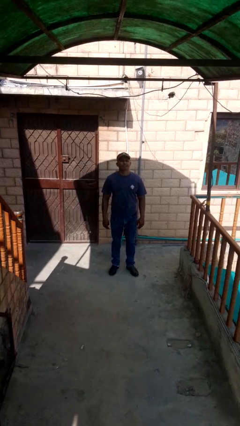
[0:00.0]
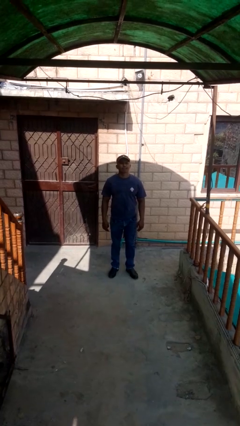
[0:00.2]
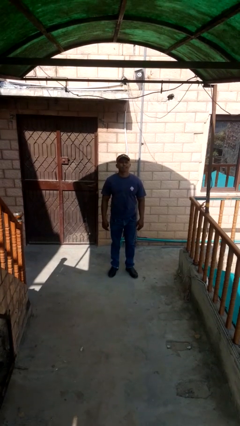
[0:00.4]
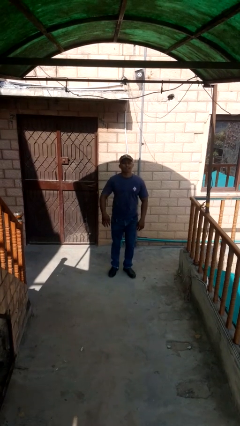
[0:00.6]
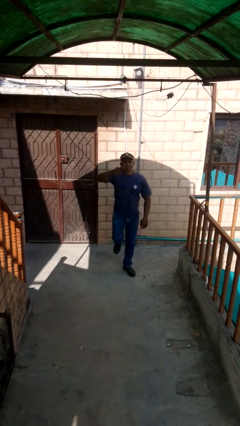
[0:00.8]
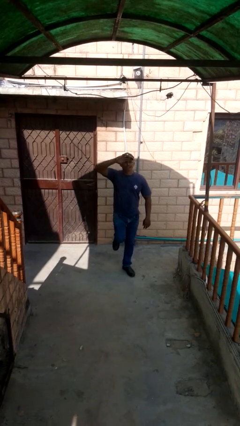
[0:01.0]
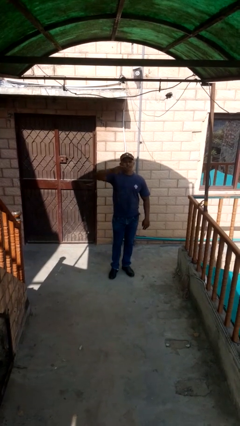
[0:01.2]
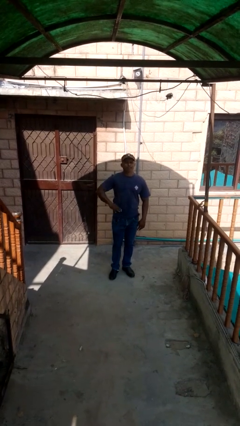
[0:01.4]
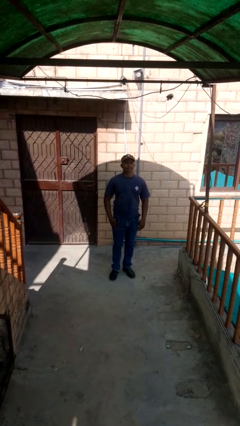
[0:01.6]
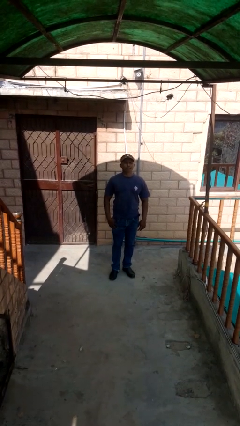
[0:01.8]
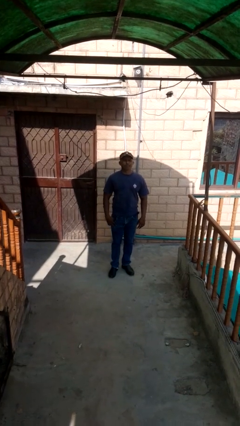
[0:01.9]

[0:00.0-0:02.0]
person salutes

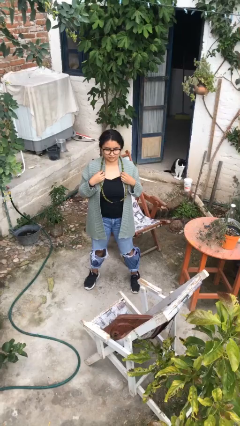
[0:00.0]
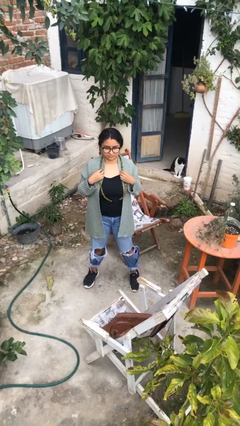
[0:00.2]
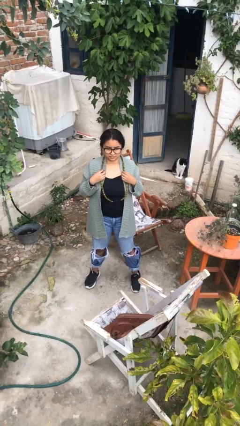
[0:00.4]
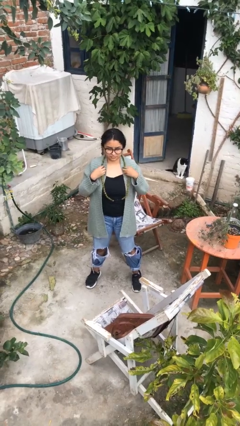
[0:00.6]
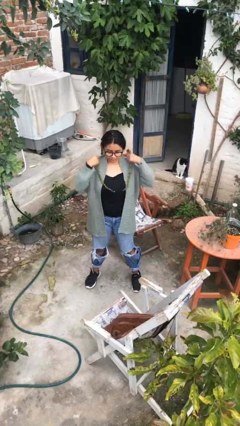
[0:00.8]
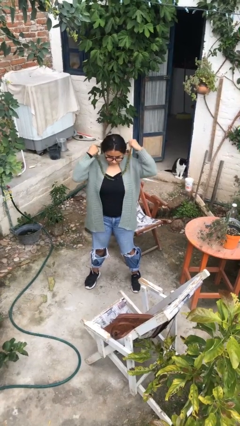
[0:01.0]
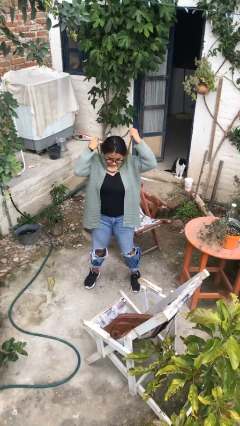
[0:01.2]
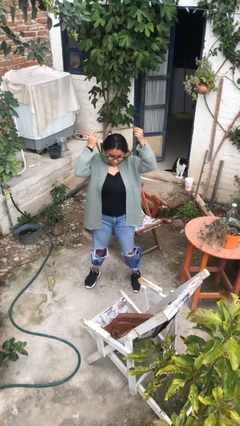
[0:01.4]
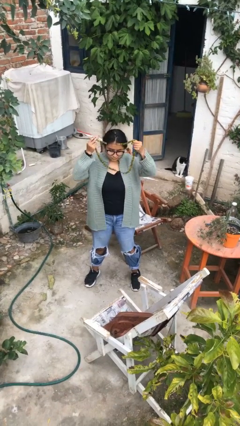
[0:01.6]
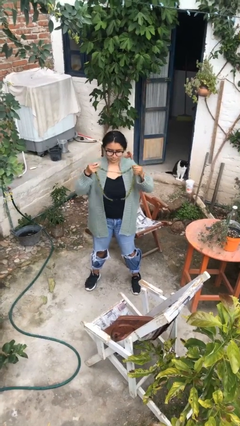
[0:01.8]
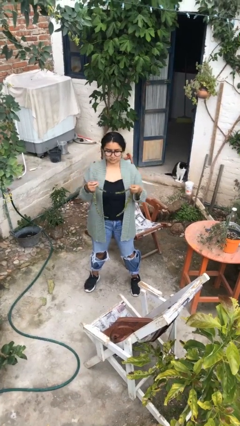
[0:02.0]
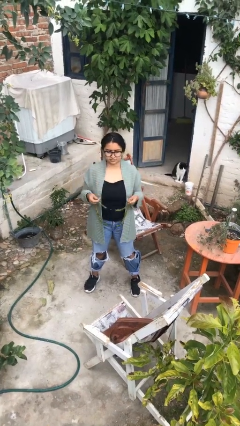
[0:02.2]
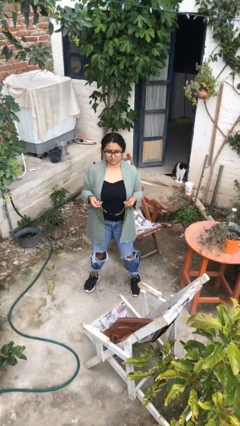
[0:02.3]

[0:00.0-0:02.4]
person takes off necklace

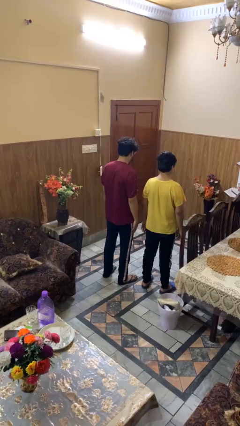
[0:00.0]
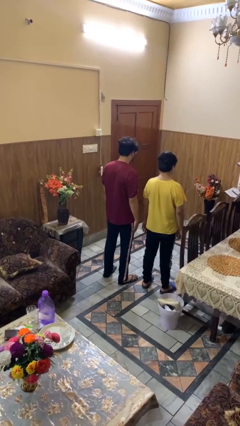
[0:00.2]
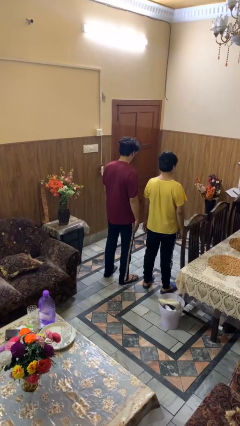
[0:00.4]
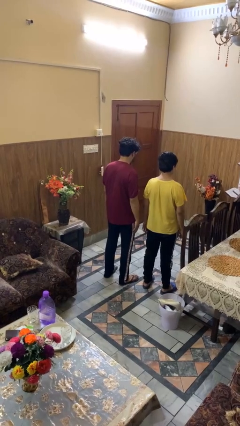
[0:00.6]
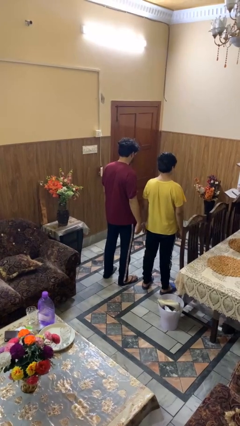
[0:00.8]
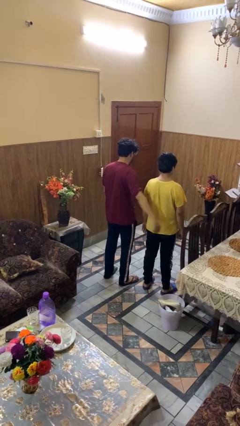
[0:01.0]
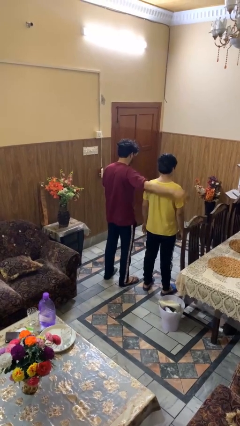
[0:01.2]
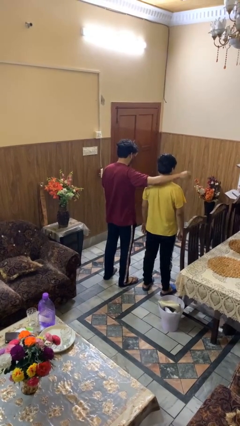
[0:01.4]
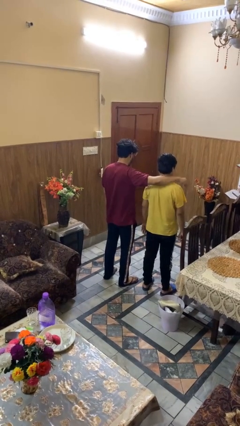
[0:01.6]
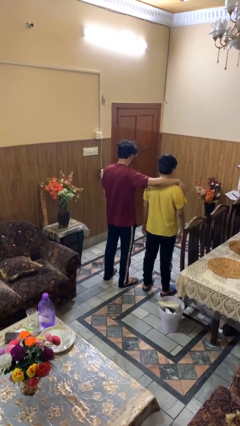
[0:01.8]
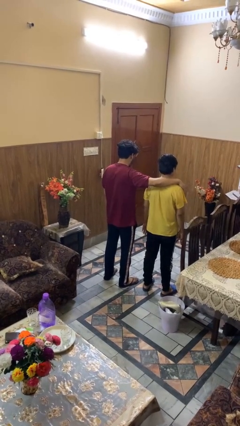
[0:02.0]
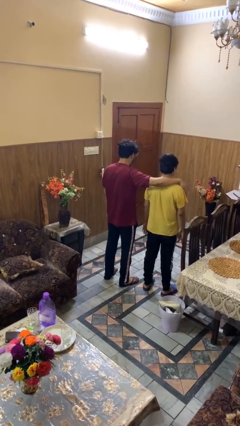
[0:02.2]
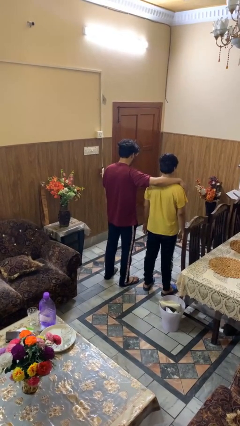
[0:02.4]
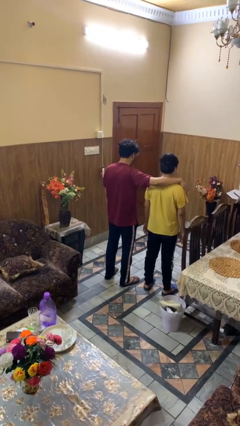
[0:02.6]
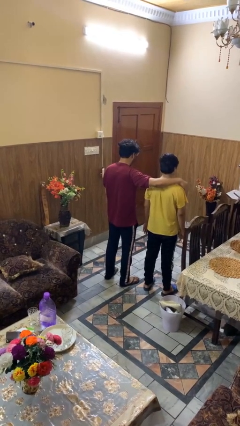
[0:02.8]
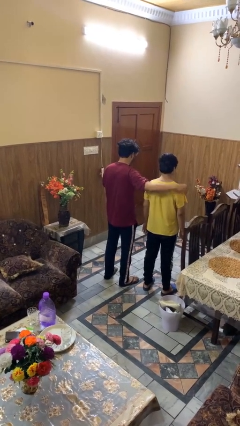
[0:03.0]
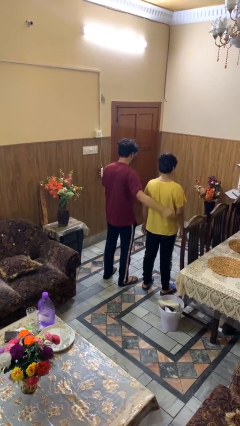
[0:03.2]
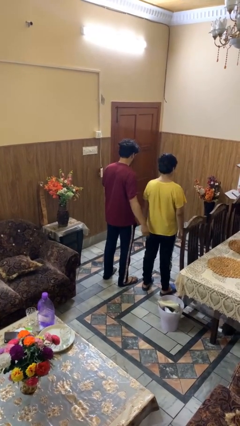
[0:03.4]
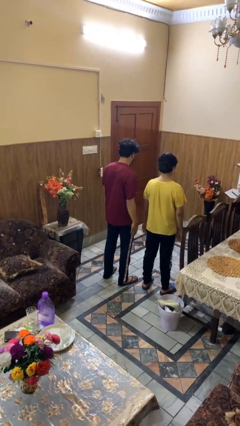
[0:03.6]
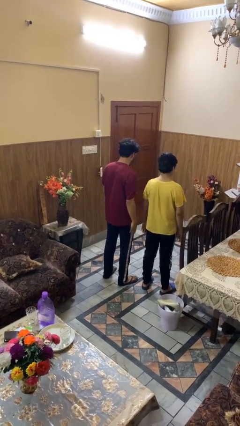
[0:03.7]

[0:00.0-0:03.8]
person pounds shoulders of person

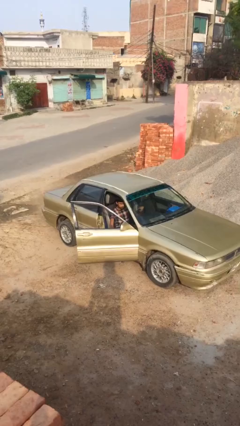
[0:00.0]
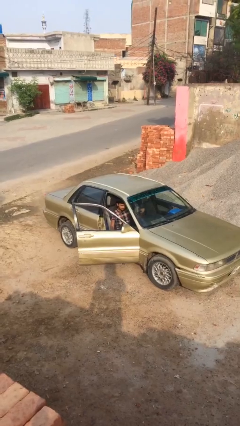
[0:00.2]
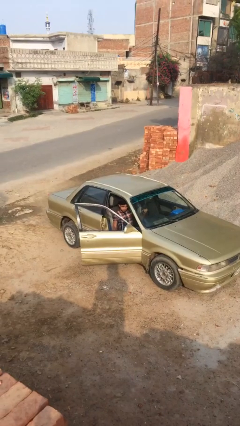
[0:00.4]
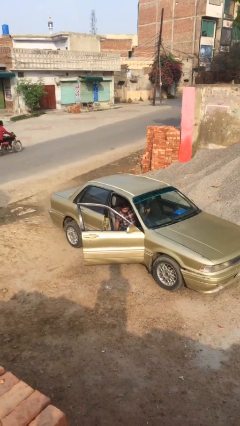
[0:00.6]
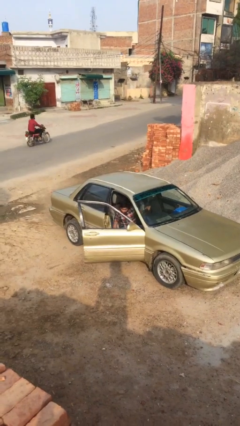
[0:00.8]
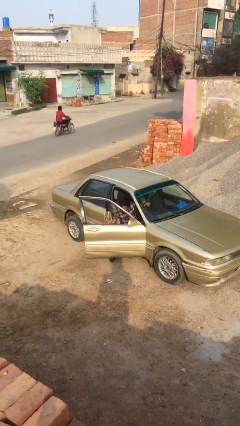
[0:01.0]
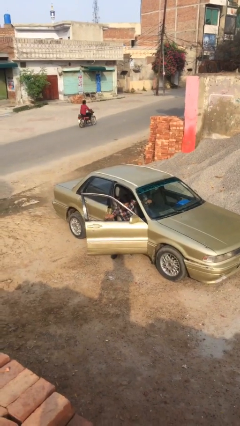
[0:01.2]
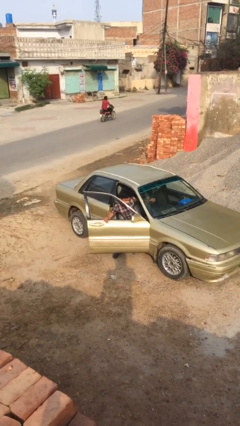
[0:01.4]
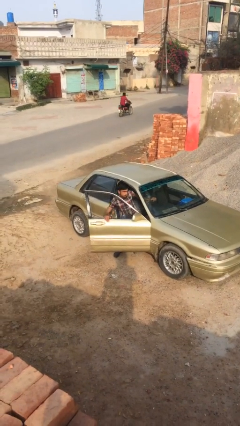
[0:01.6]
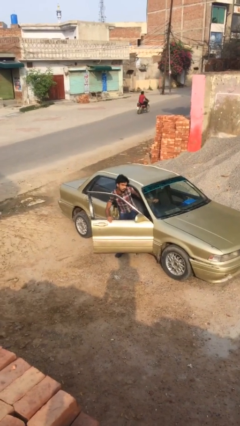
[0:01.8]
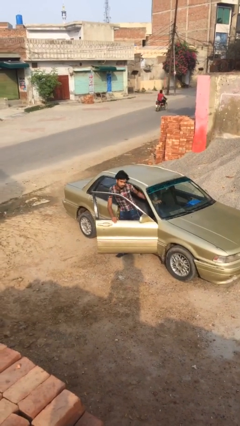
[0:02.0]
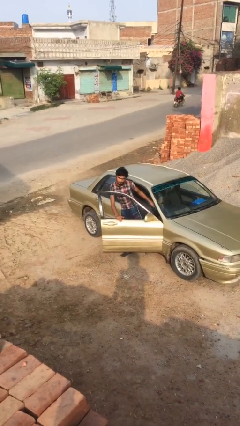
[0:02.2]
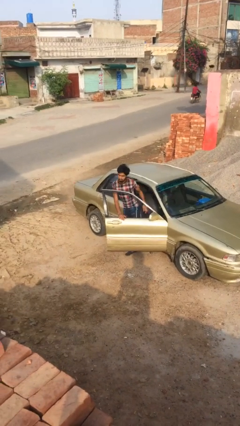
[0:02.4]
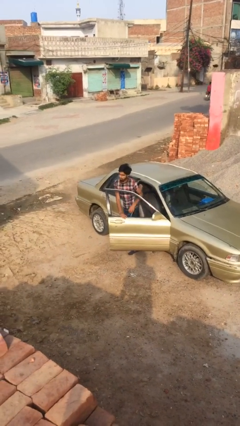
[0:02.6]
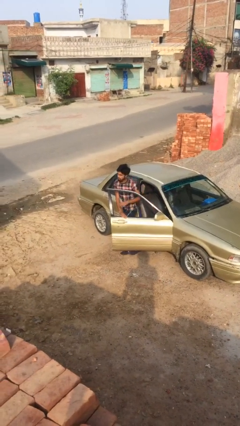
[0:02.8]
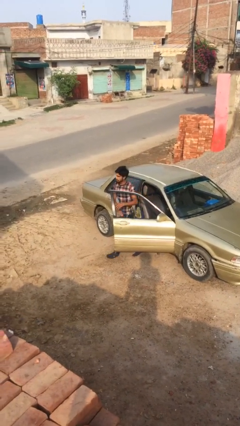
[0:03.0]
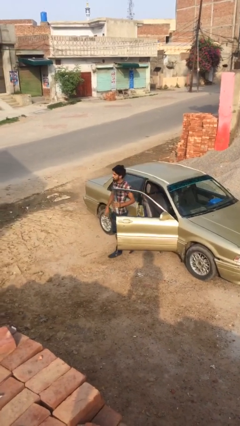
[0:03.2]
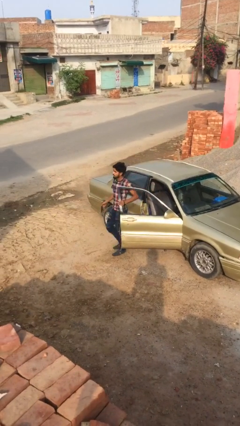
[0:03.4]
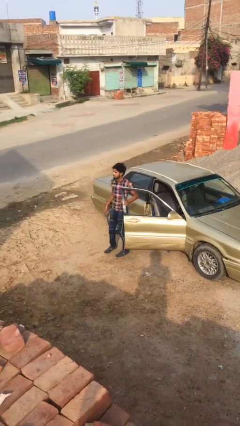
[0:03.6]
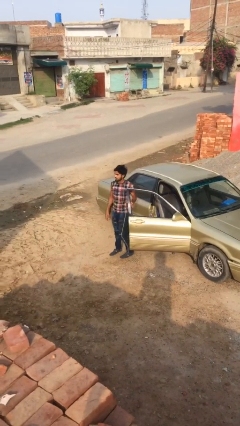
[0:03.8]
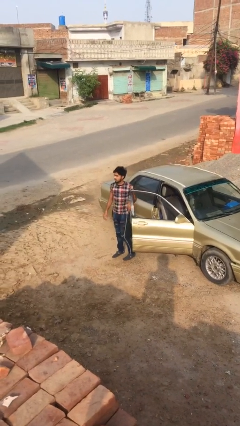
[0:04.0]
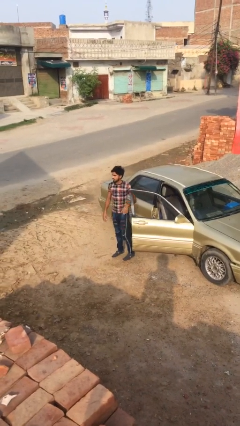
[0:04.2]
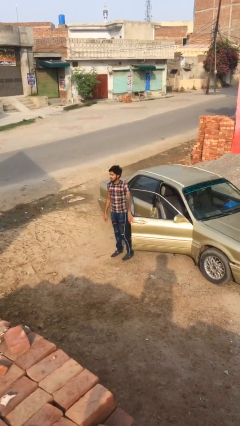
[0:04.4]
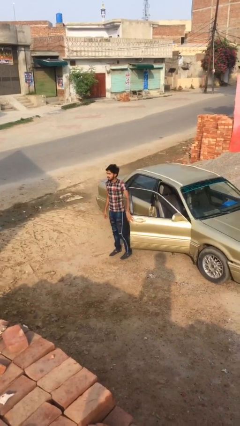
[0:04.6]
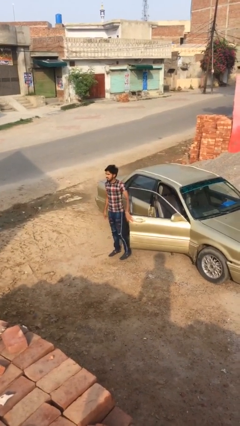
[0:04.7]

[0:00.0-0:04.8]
person exits car

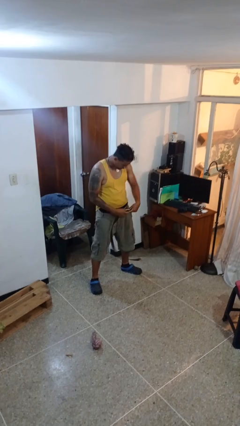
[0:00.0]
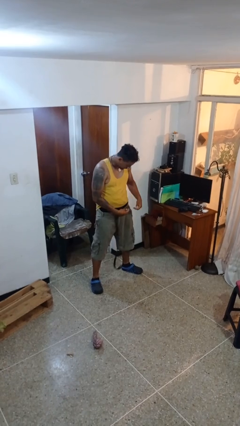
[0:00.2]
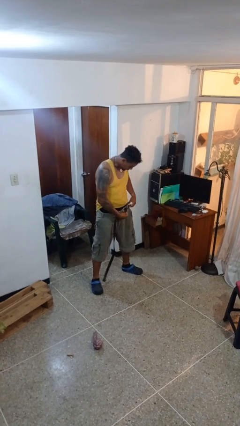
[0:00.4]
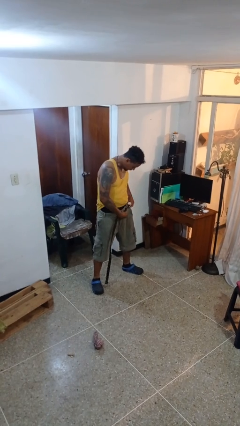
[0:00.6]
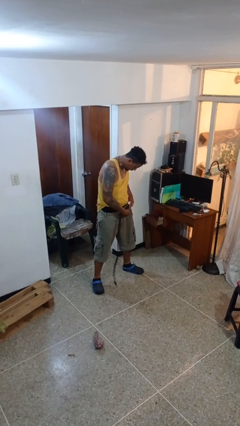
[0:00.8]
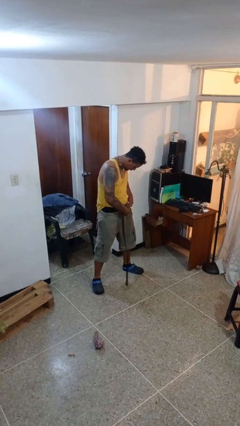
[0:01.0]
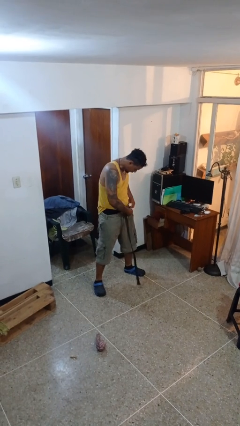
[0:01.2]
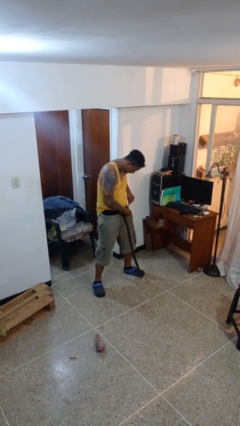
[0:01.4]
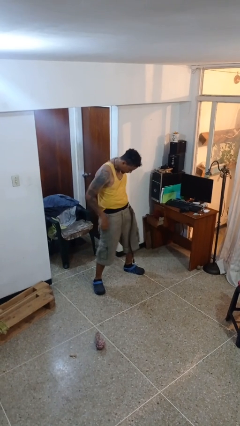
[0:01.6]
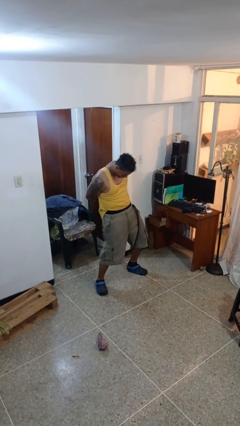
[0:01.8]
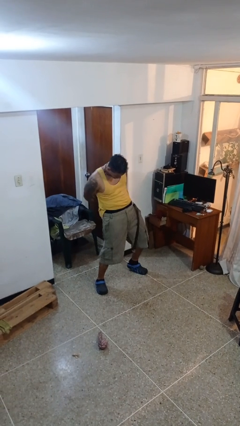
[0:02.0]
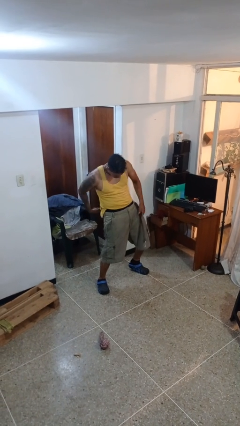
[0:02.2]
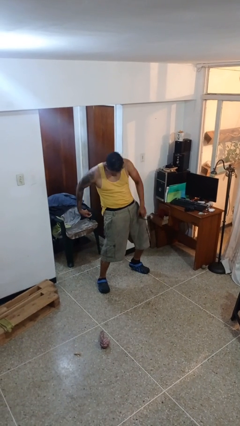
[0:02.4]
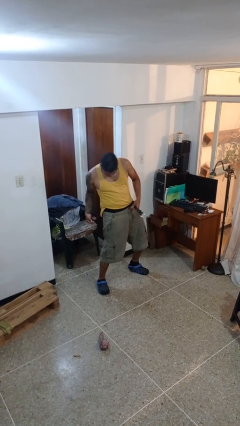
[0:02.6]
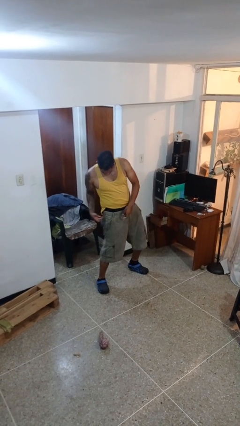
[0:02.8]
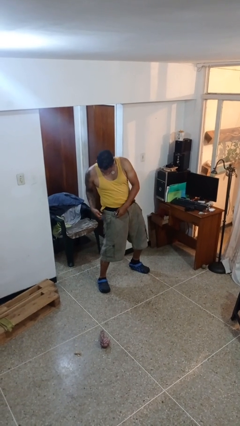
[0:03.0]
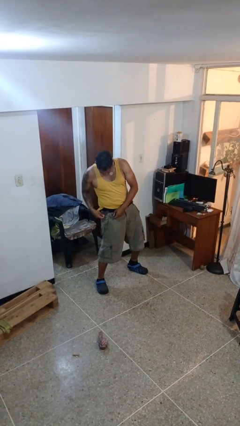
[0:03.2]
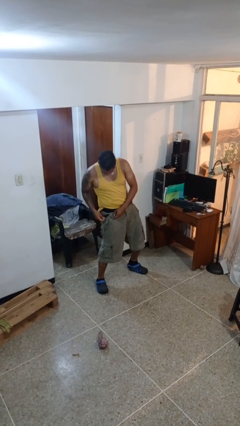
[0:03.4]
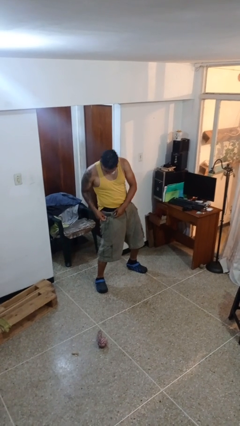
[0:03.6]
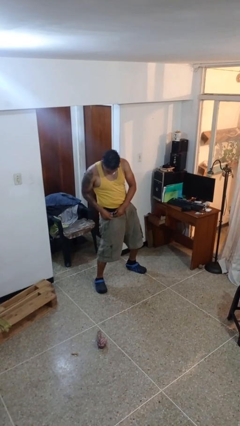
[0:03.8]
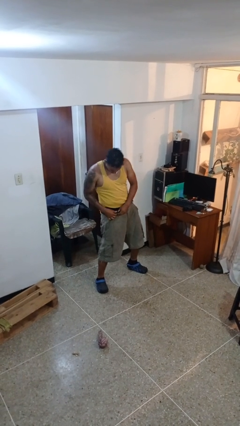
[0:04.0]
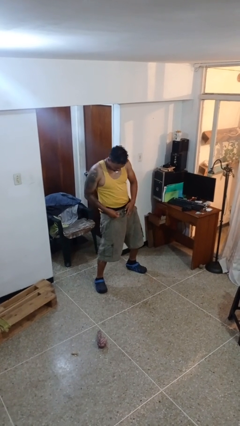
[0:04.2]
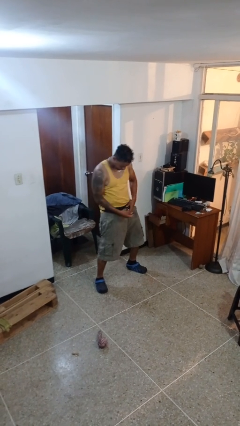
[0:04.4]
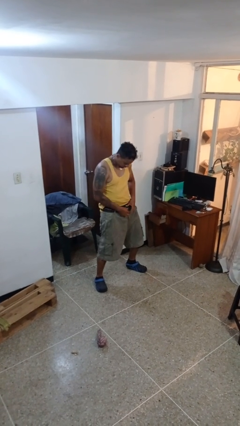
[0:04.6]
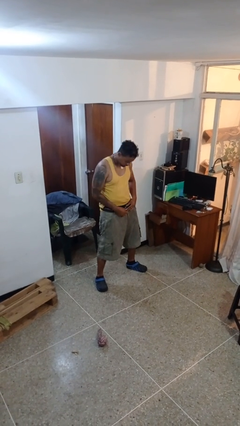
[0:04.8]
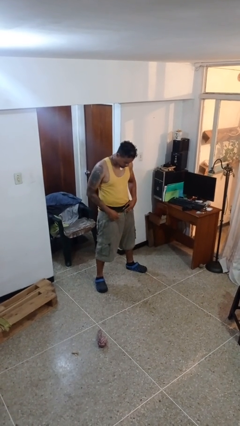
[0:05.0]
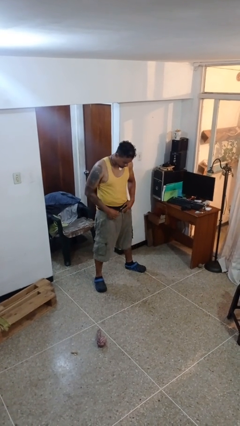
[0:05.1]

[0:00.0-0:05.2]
person puts on belt
